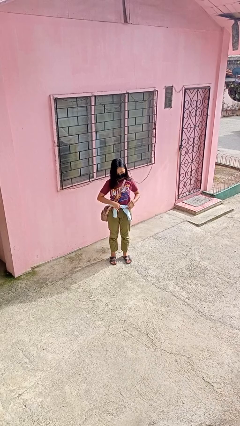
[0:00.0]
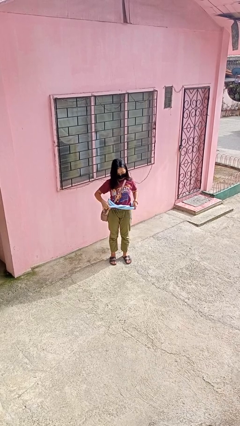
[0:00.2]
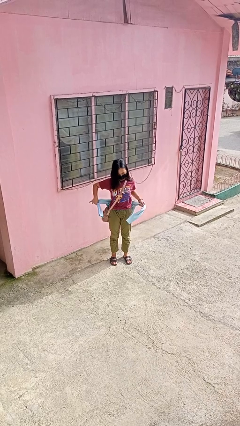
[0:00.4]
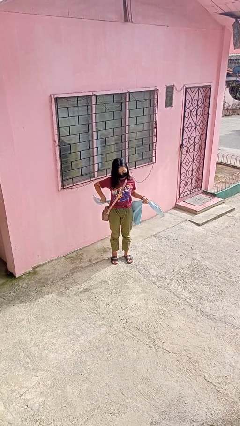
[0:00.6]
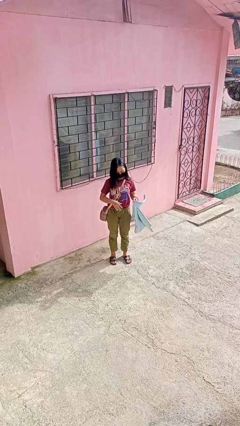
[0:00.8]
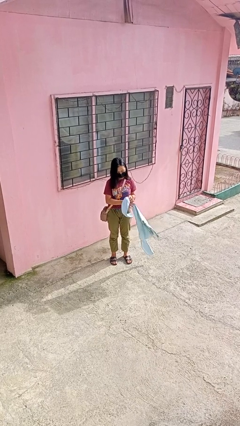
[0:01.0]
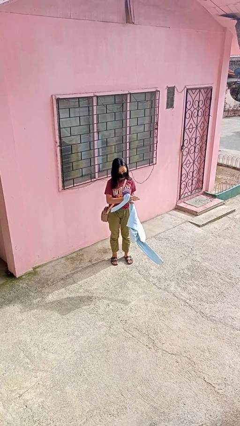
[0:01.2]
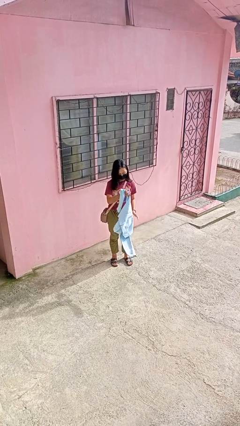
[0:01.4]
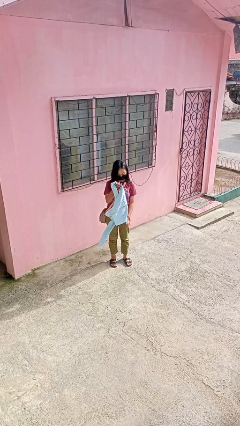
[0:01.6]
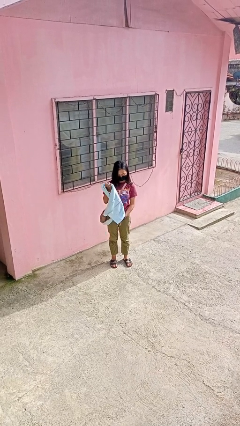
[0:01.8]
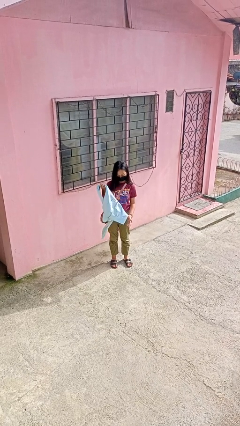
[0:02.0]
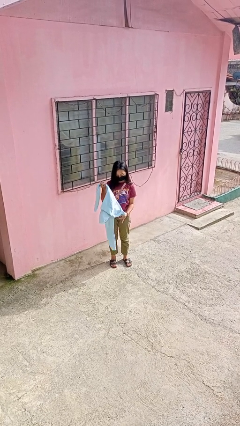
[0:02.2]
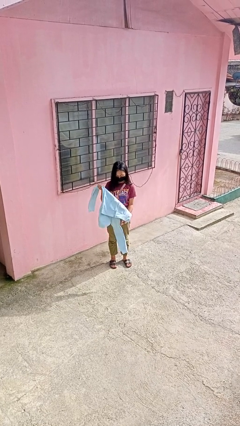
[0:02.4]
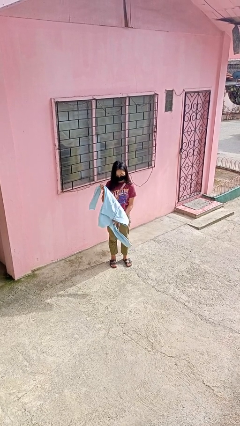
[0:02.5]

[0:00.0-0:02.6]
person unties jacket around waist

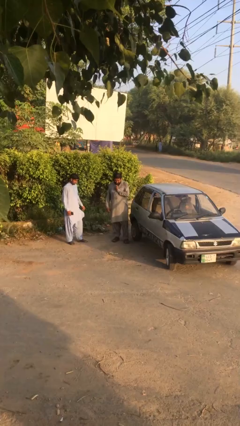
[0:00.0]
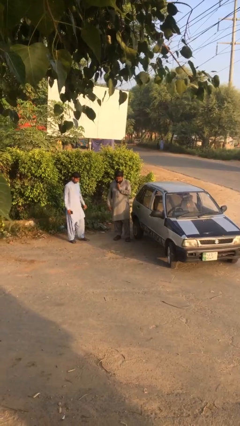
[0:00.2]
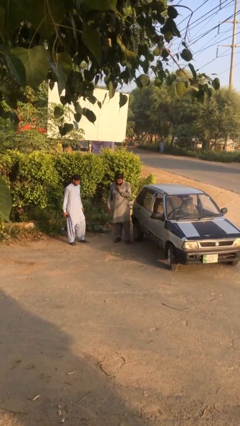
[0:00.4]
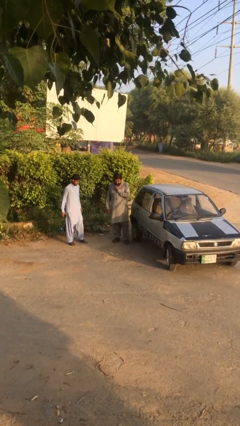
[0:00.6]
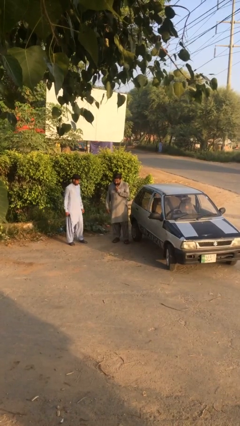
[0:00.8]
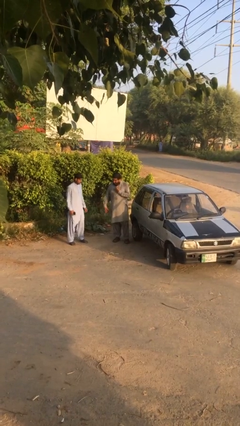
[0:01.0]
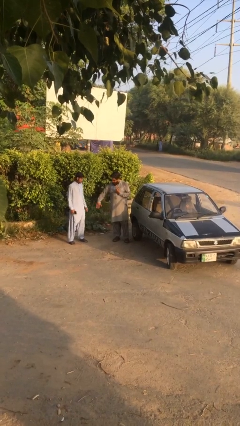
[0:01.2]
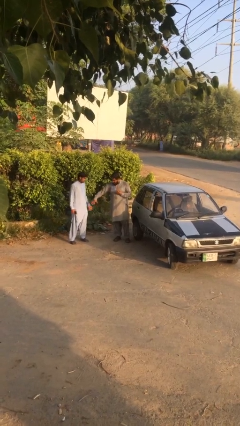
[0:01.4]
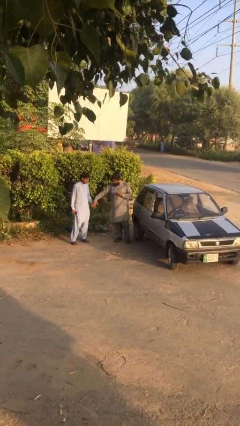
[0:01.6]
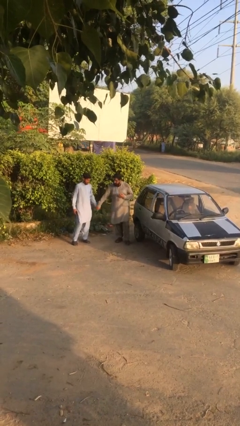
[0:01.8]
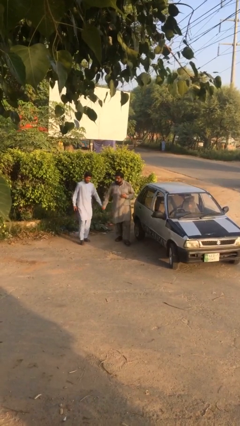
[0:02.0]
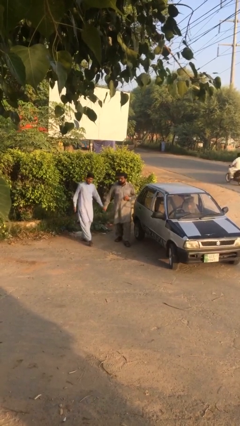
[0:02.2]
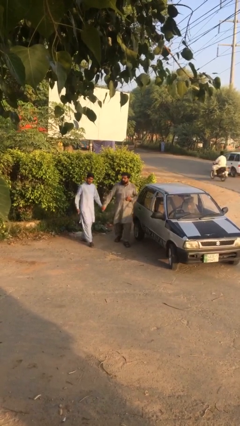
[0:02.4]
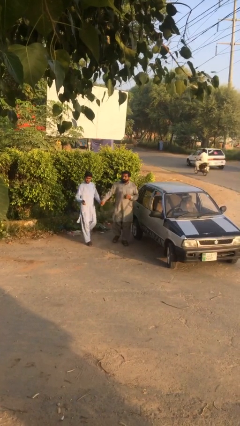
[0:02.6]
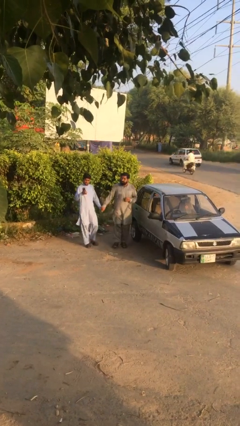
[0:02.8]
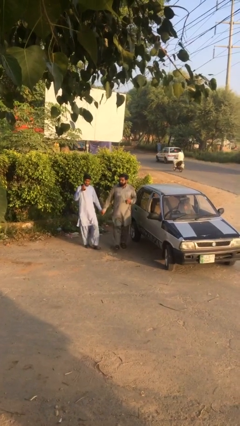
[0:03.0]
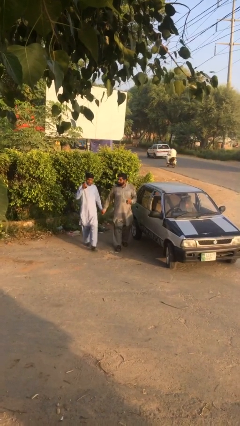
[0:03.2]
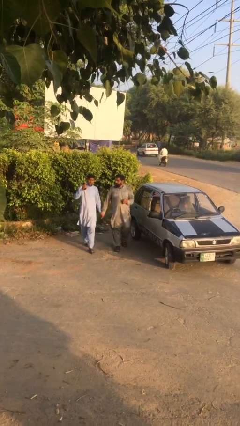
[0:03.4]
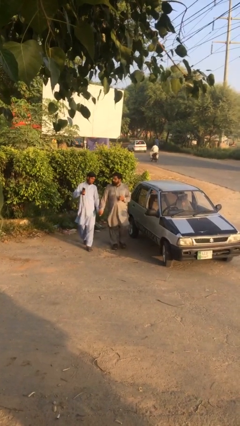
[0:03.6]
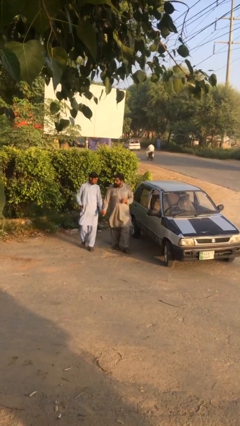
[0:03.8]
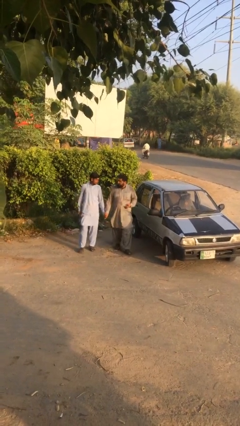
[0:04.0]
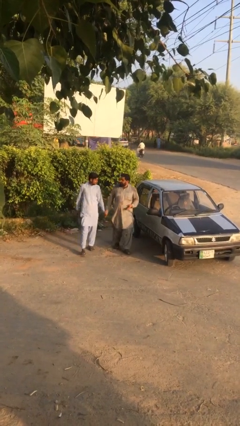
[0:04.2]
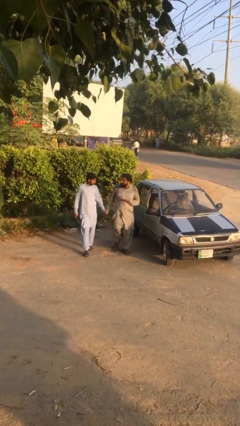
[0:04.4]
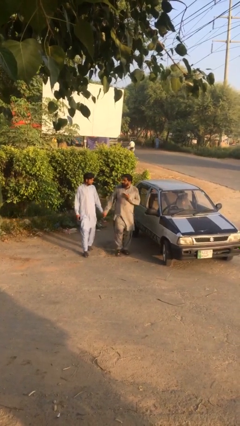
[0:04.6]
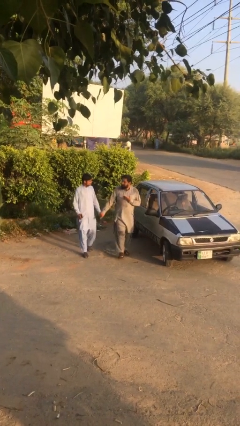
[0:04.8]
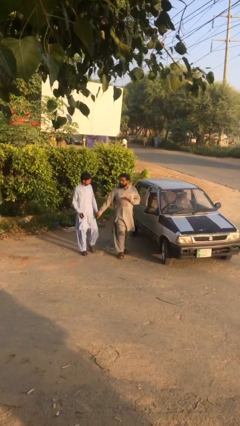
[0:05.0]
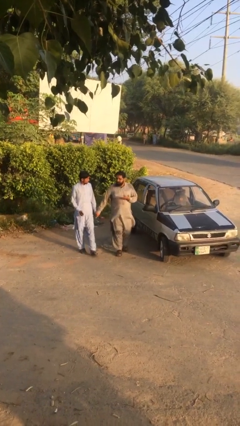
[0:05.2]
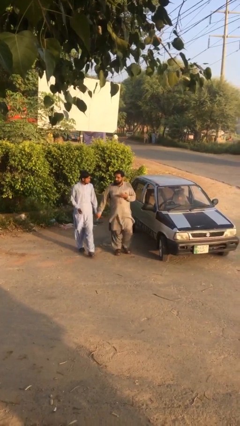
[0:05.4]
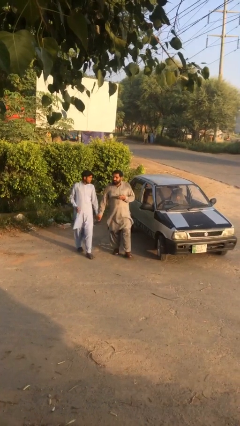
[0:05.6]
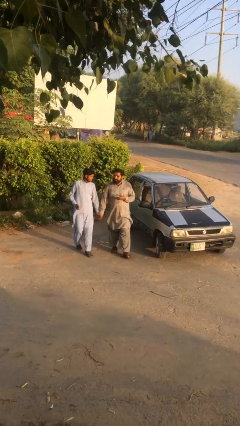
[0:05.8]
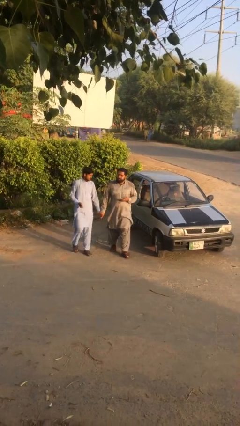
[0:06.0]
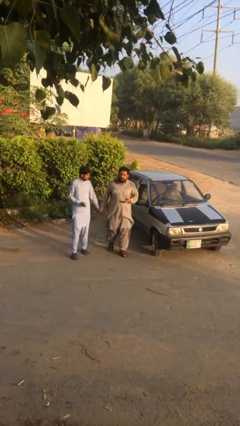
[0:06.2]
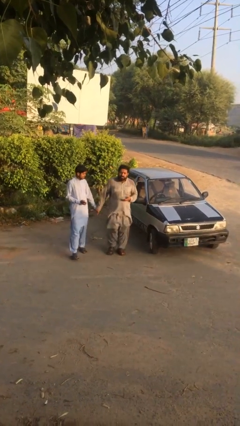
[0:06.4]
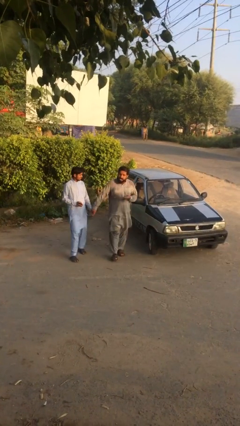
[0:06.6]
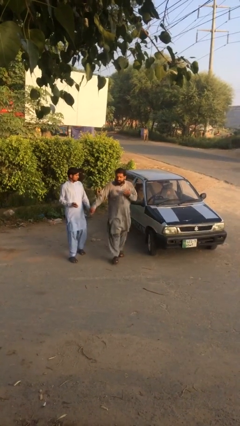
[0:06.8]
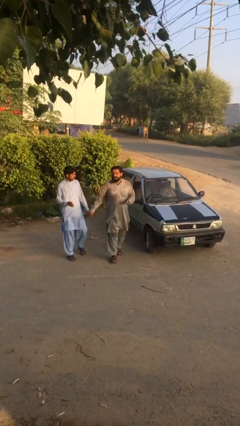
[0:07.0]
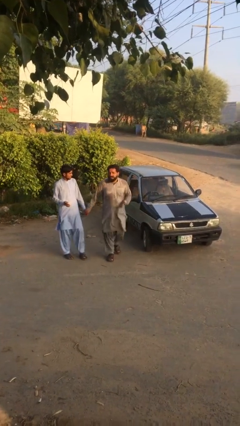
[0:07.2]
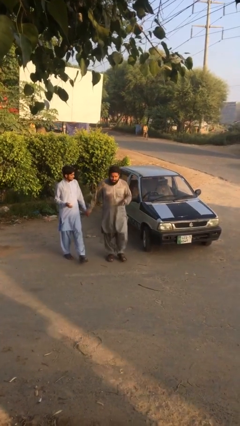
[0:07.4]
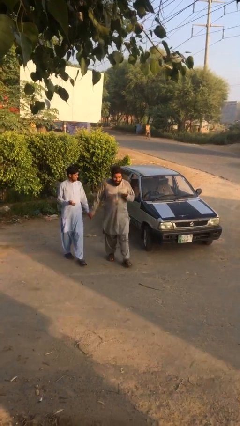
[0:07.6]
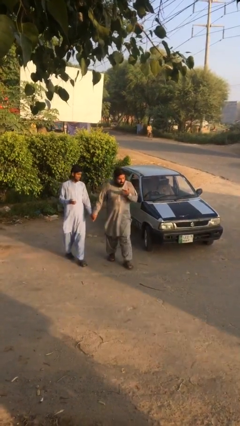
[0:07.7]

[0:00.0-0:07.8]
person holds hand

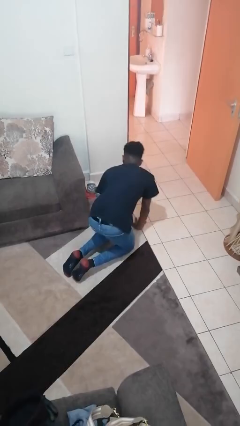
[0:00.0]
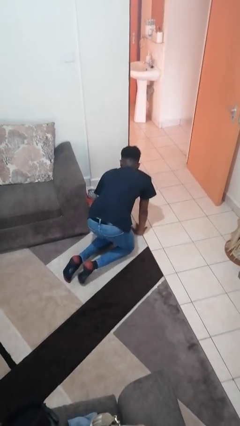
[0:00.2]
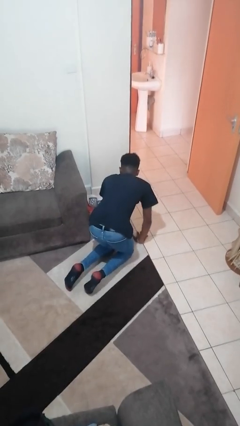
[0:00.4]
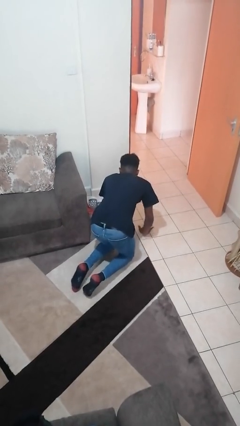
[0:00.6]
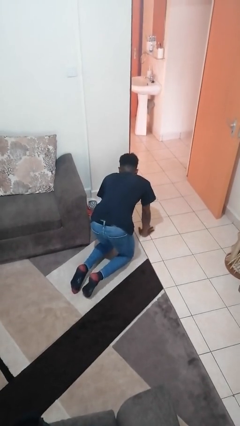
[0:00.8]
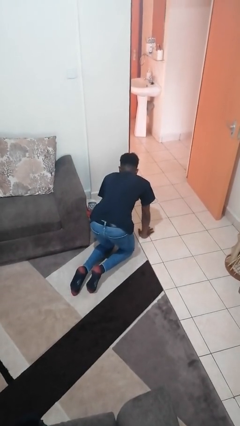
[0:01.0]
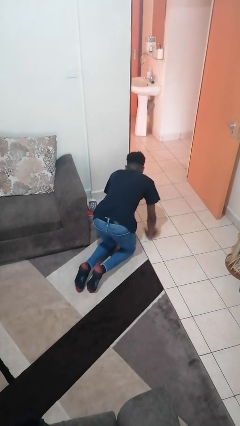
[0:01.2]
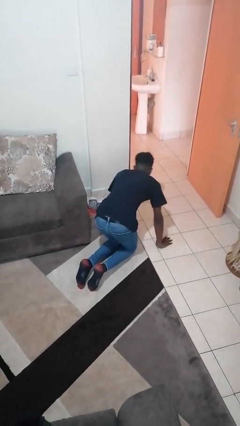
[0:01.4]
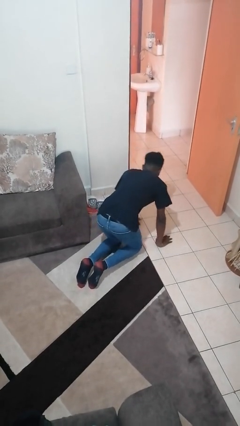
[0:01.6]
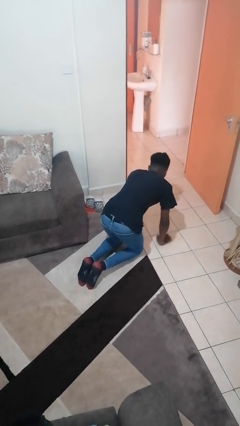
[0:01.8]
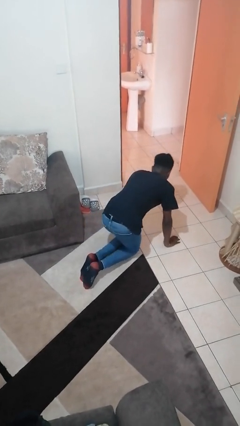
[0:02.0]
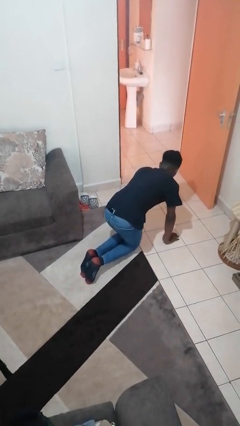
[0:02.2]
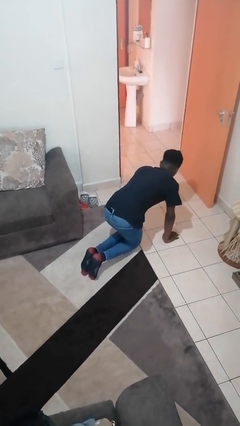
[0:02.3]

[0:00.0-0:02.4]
person crawls

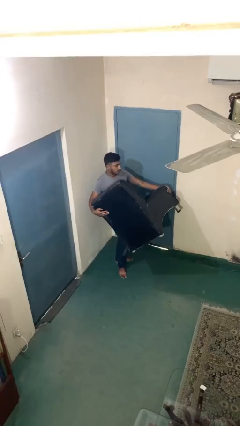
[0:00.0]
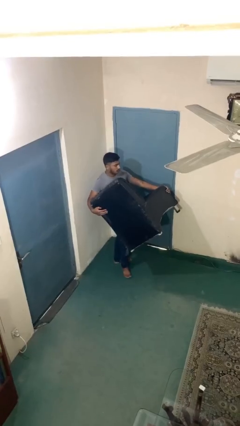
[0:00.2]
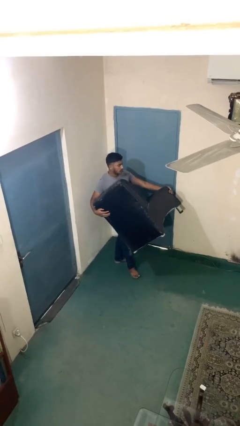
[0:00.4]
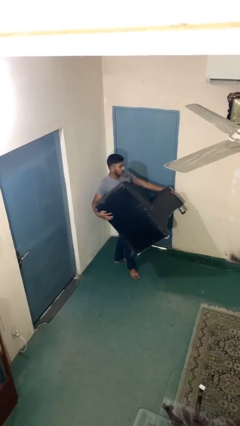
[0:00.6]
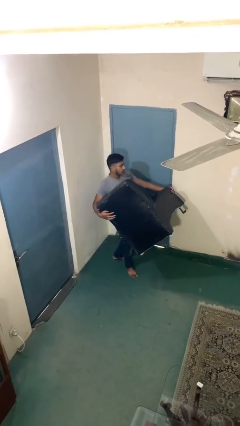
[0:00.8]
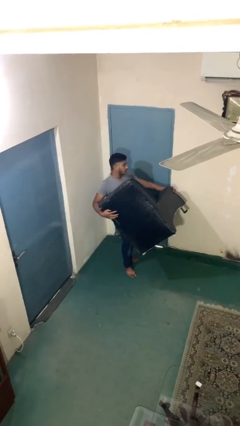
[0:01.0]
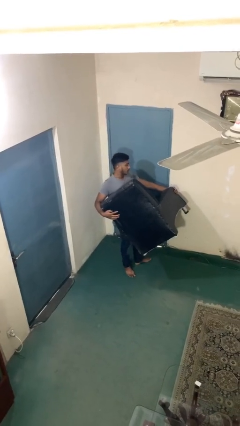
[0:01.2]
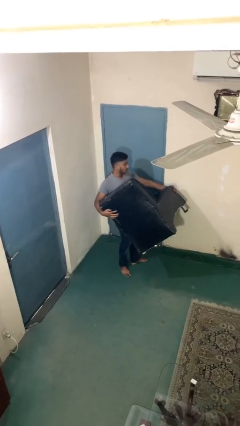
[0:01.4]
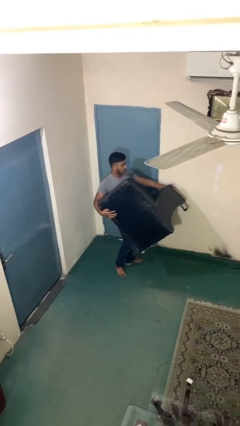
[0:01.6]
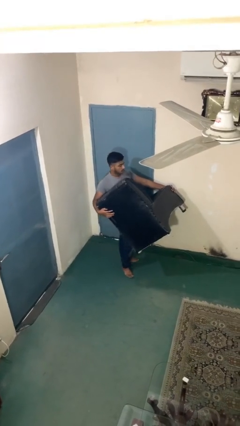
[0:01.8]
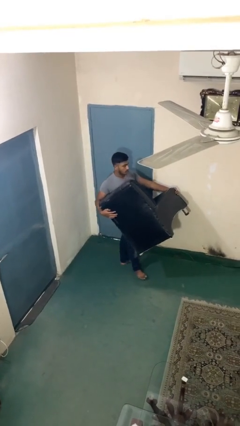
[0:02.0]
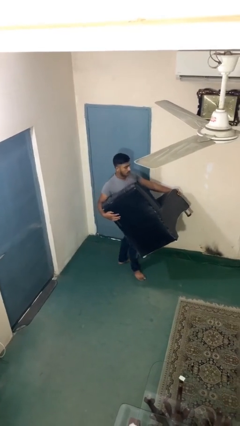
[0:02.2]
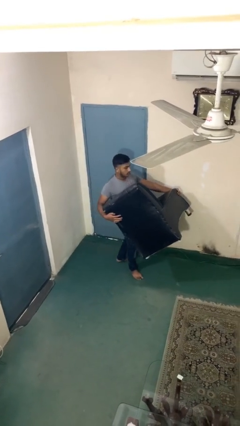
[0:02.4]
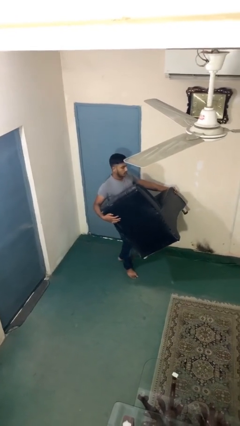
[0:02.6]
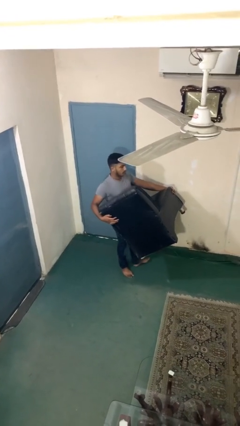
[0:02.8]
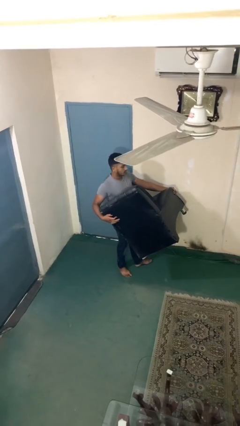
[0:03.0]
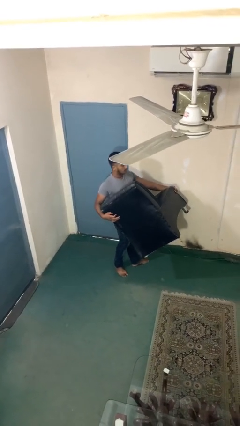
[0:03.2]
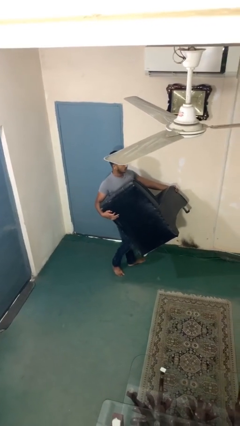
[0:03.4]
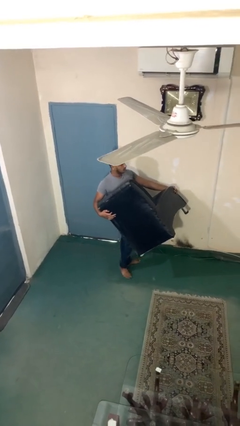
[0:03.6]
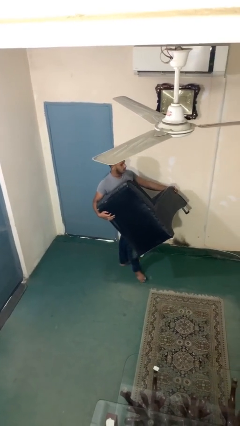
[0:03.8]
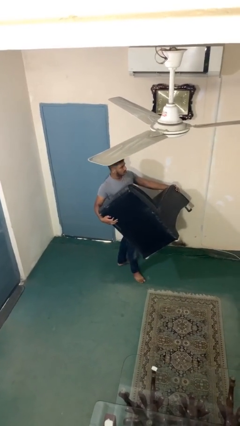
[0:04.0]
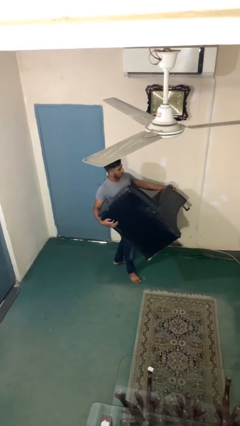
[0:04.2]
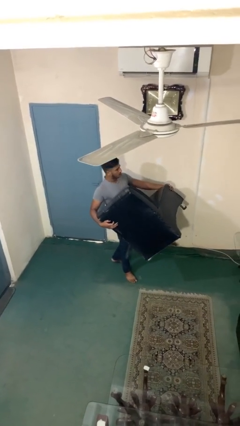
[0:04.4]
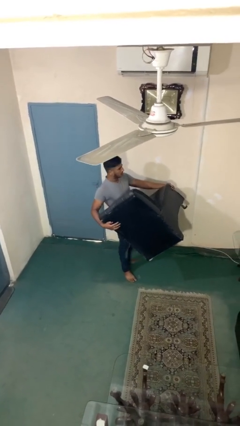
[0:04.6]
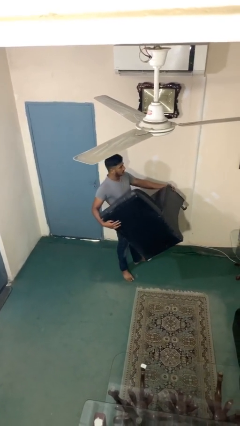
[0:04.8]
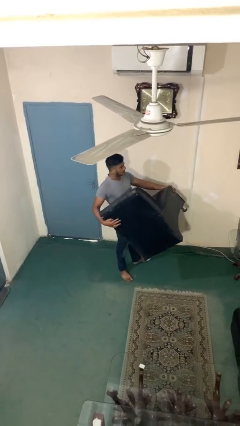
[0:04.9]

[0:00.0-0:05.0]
person carries heavy object
